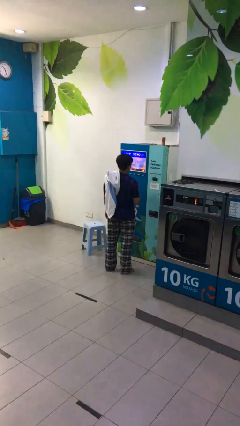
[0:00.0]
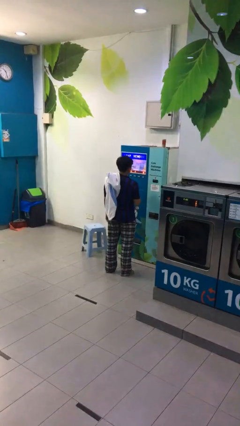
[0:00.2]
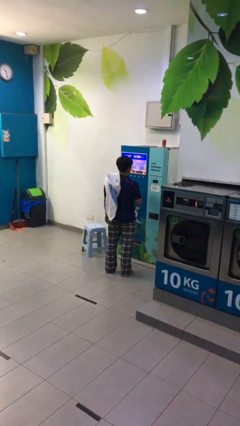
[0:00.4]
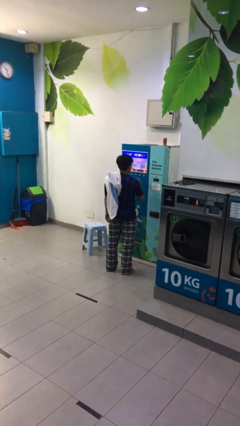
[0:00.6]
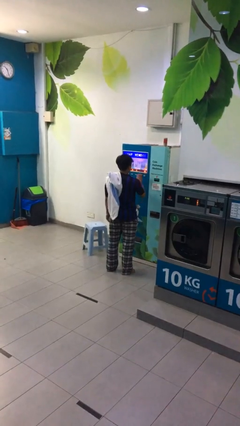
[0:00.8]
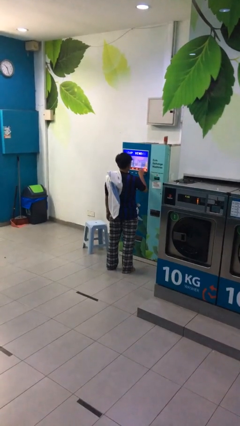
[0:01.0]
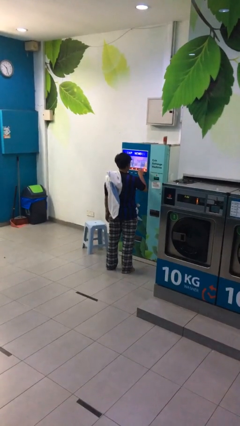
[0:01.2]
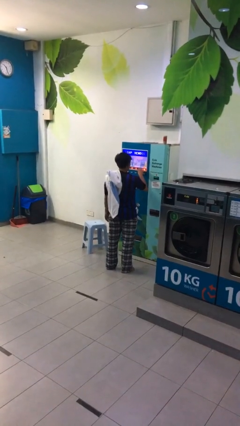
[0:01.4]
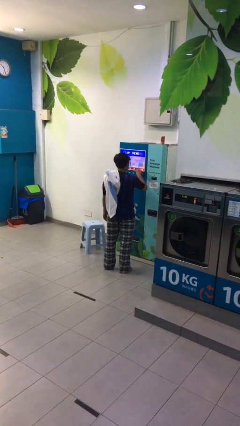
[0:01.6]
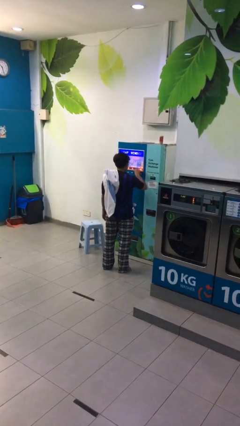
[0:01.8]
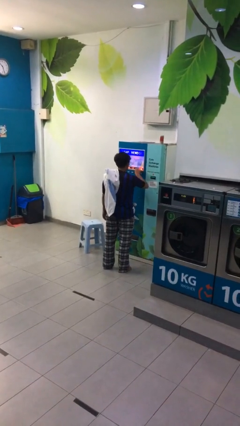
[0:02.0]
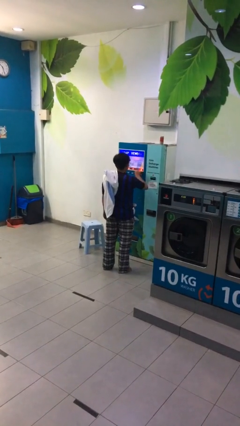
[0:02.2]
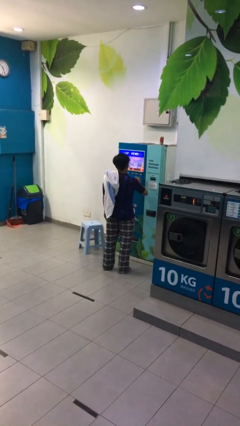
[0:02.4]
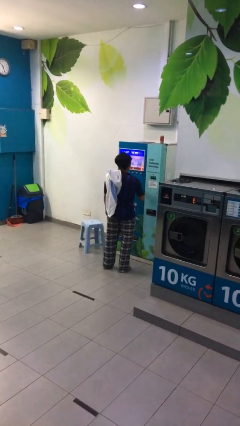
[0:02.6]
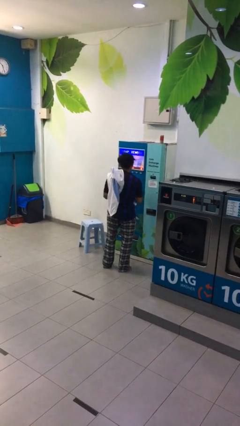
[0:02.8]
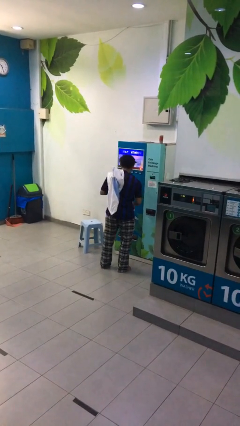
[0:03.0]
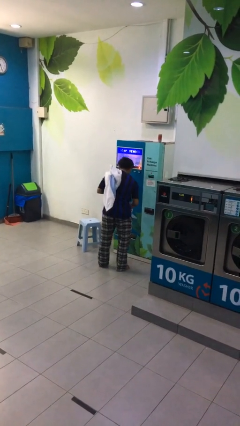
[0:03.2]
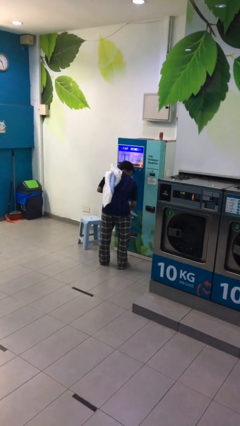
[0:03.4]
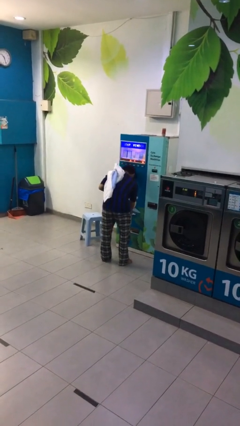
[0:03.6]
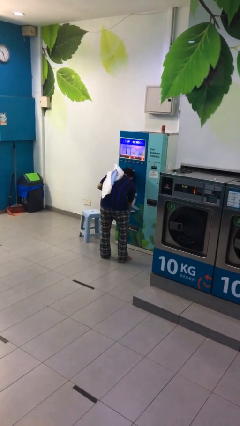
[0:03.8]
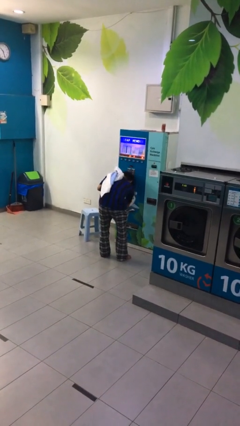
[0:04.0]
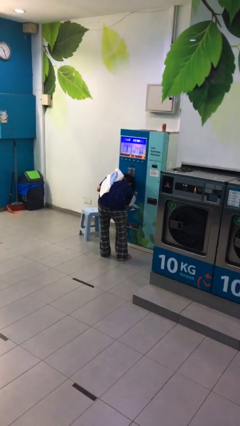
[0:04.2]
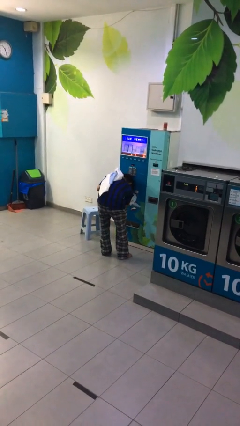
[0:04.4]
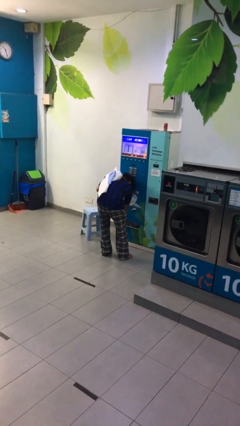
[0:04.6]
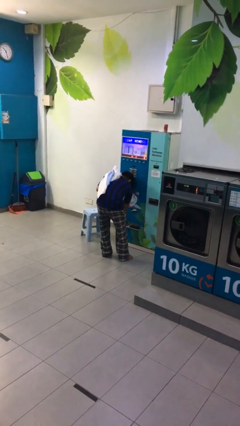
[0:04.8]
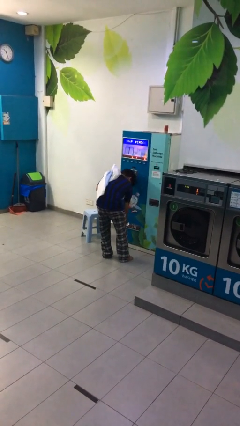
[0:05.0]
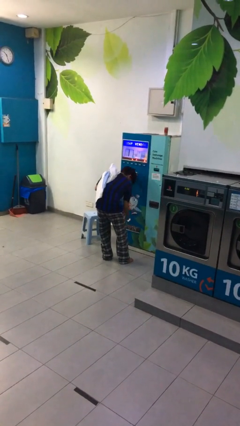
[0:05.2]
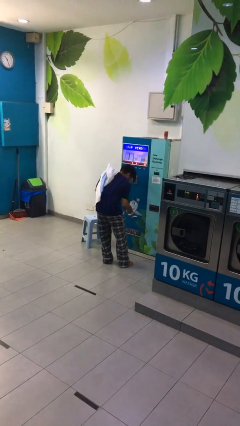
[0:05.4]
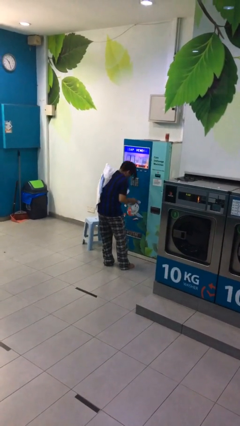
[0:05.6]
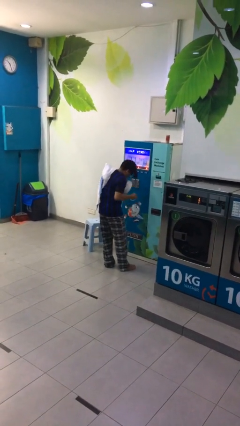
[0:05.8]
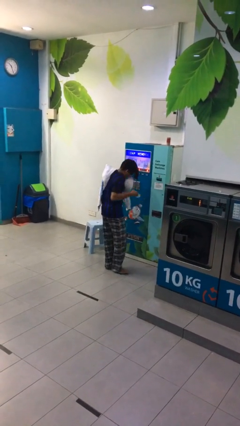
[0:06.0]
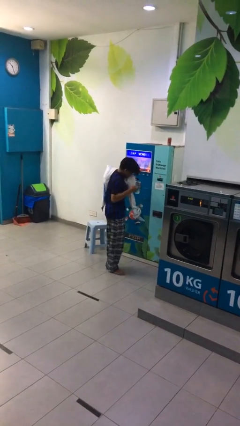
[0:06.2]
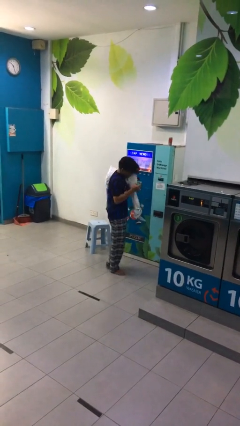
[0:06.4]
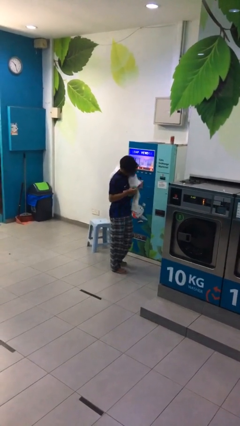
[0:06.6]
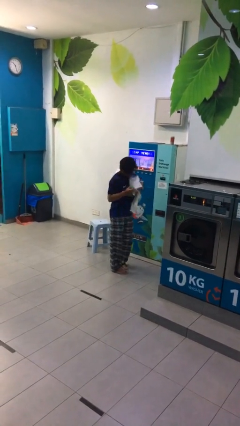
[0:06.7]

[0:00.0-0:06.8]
person purchases from machine

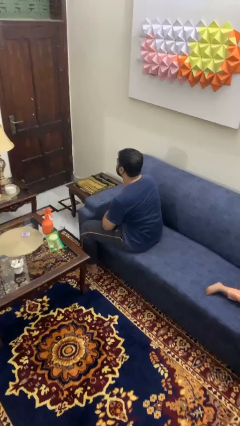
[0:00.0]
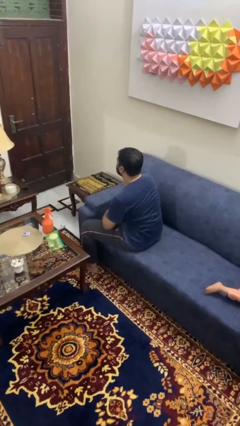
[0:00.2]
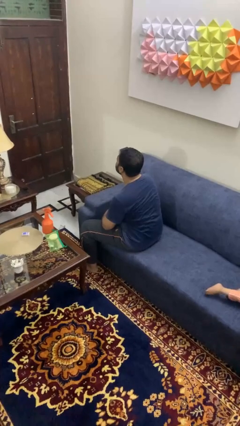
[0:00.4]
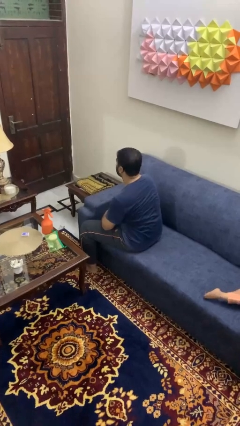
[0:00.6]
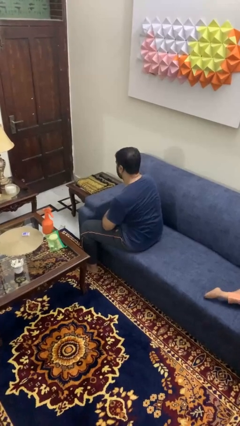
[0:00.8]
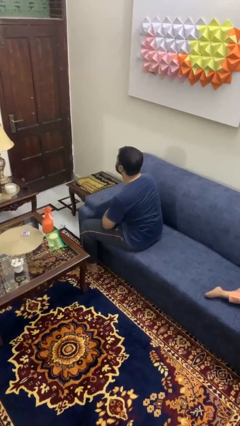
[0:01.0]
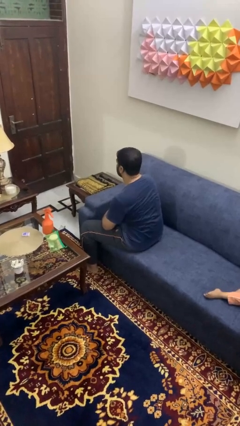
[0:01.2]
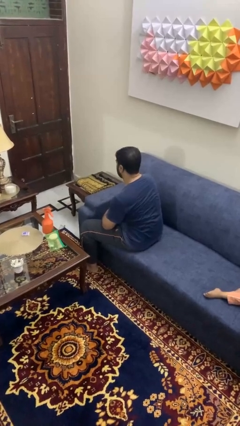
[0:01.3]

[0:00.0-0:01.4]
person nods head

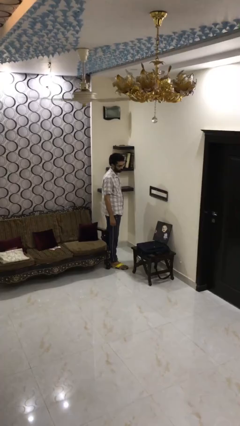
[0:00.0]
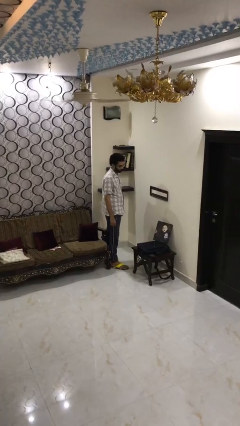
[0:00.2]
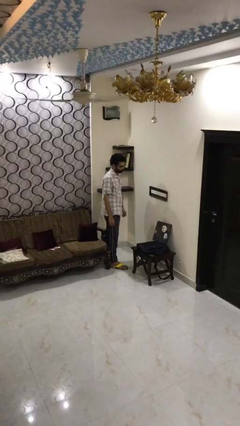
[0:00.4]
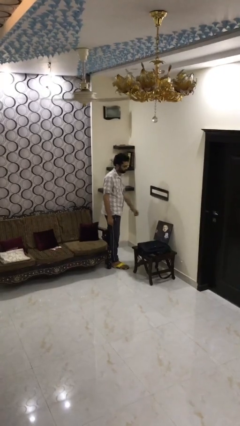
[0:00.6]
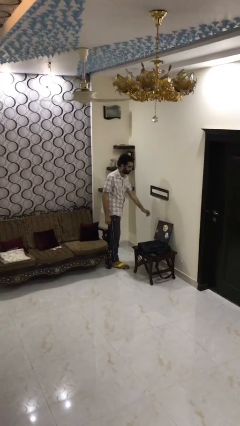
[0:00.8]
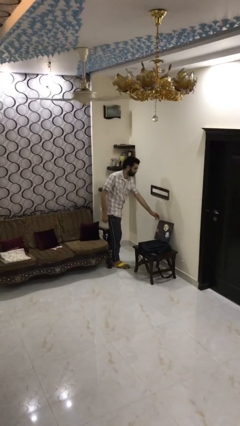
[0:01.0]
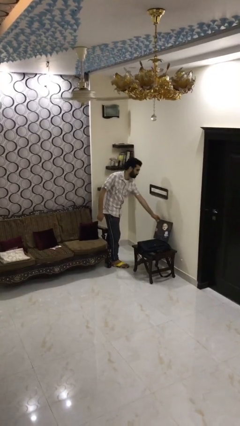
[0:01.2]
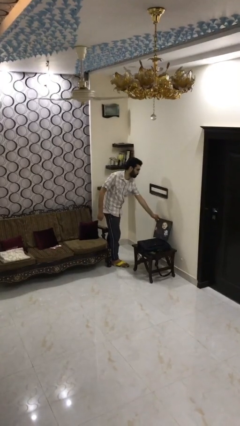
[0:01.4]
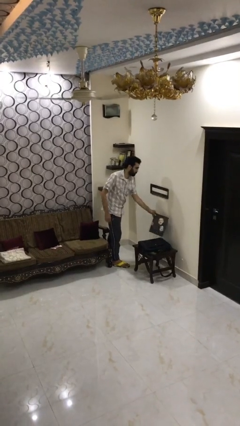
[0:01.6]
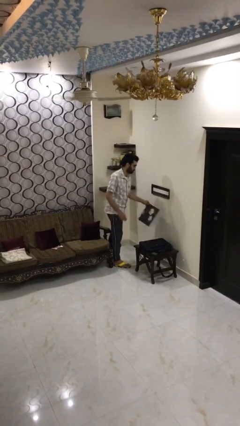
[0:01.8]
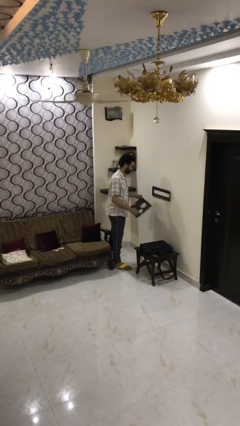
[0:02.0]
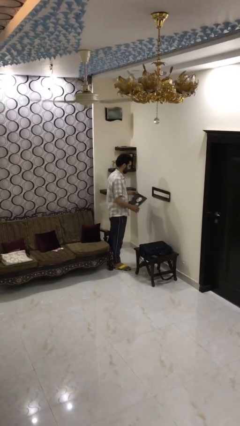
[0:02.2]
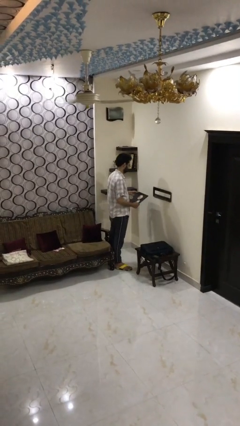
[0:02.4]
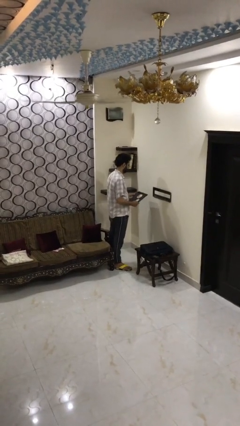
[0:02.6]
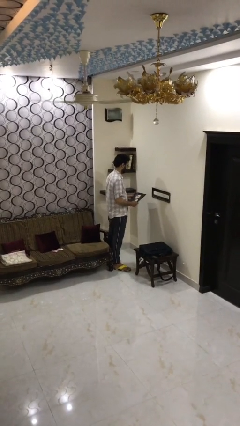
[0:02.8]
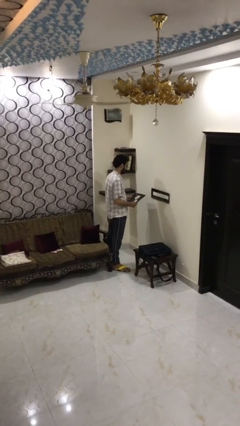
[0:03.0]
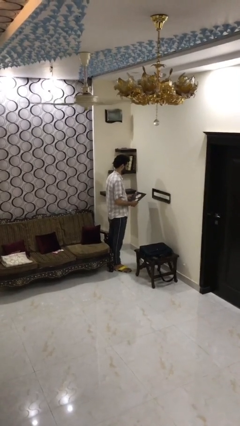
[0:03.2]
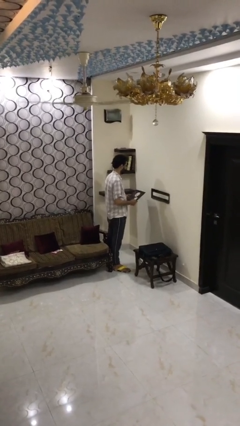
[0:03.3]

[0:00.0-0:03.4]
person picks up object from table

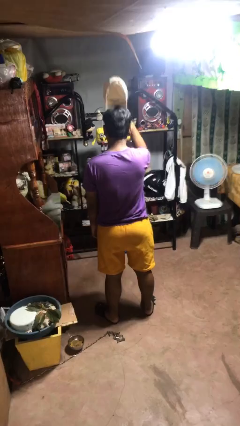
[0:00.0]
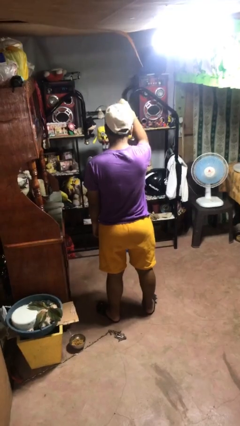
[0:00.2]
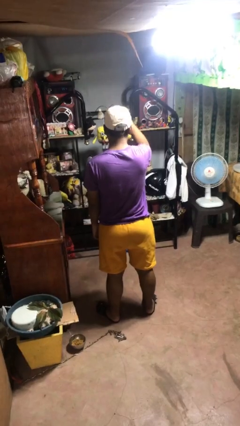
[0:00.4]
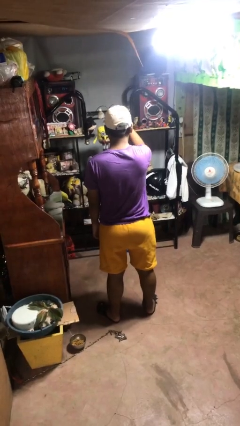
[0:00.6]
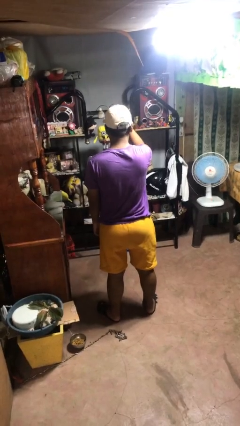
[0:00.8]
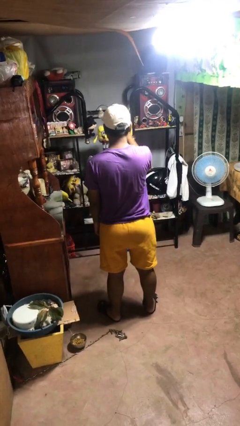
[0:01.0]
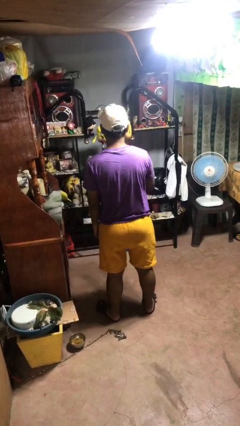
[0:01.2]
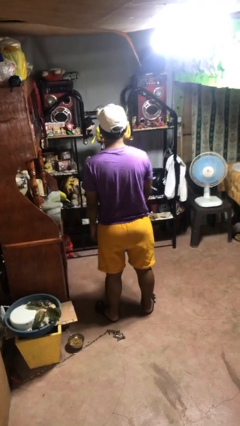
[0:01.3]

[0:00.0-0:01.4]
person puts on hat

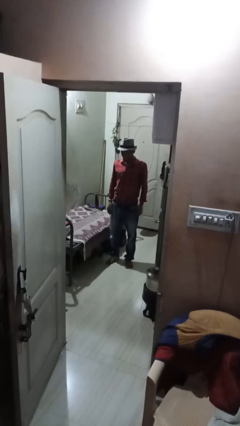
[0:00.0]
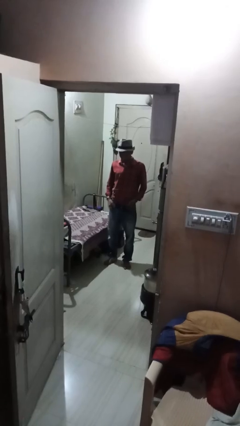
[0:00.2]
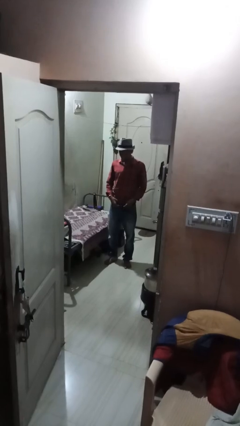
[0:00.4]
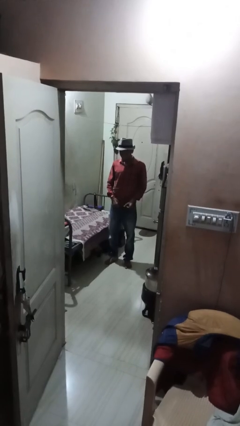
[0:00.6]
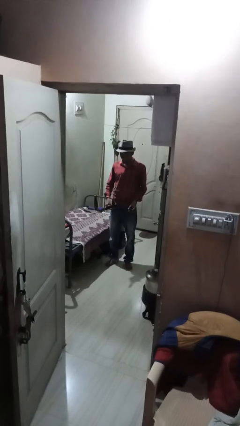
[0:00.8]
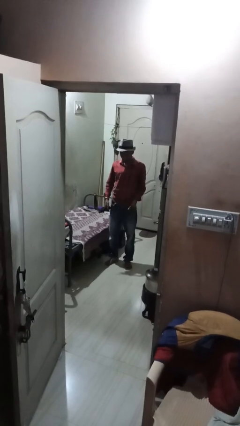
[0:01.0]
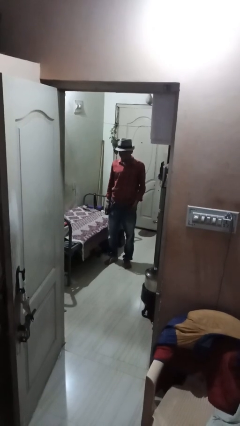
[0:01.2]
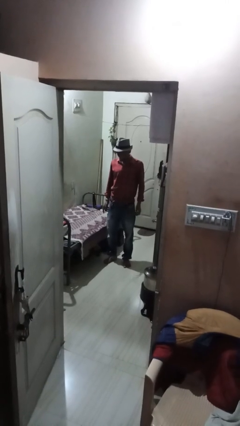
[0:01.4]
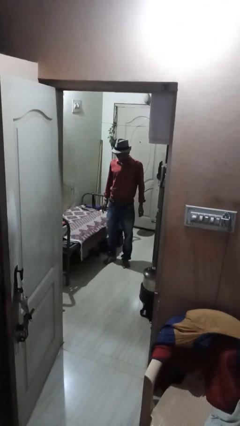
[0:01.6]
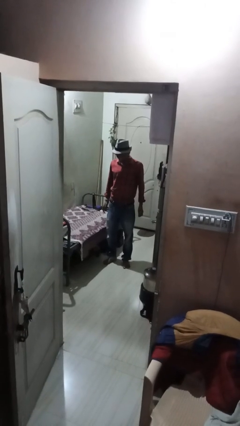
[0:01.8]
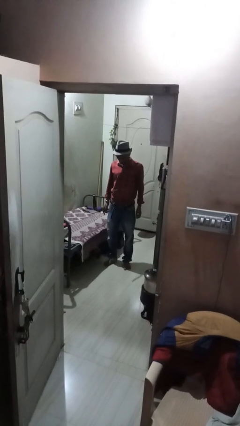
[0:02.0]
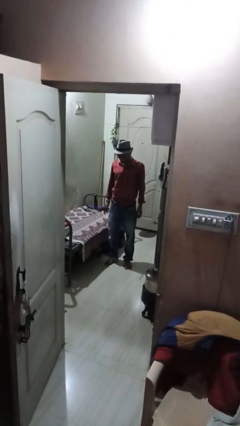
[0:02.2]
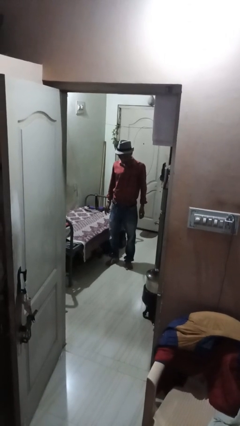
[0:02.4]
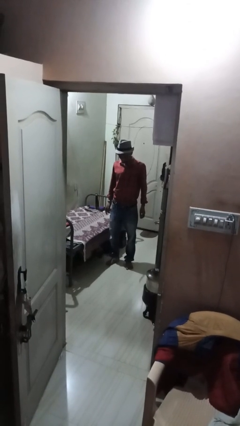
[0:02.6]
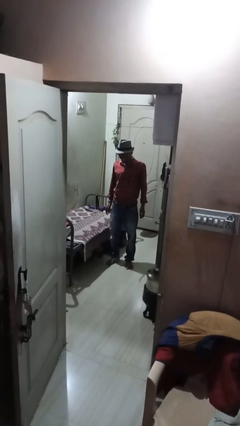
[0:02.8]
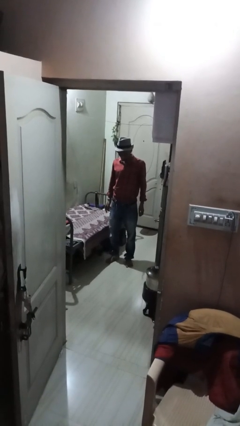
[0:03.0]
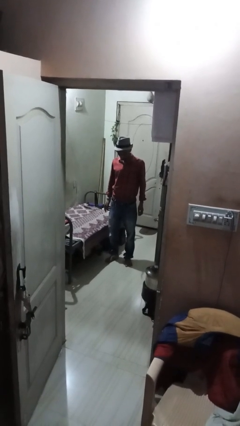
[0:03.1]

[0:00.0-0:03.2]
person takes off belt

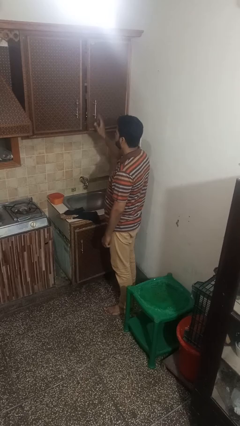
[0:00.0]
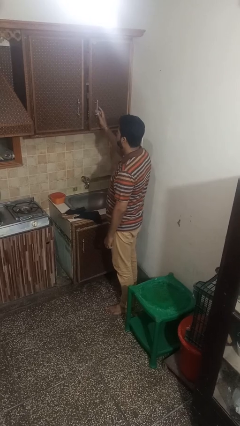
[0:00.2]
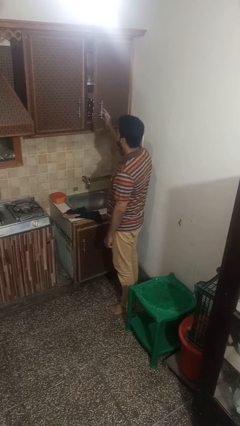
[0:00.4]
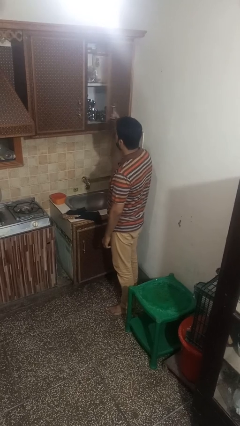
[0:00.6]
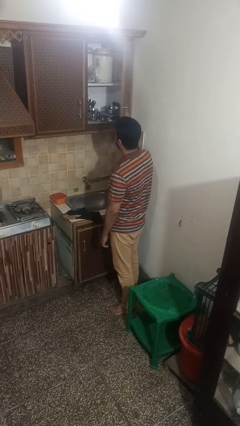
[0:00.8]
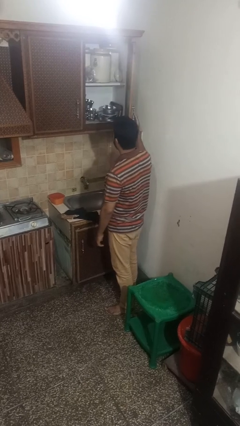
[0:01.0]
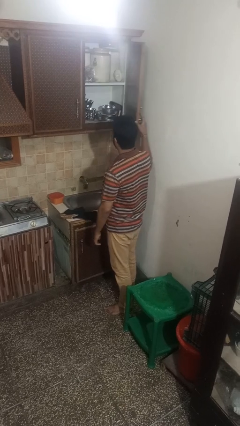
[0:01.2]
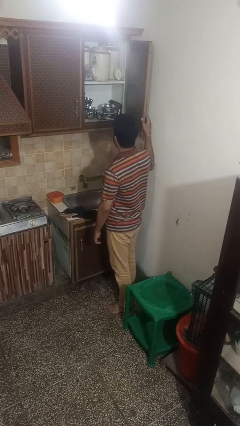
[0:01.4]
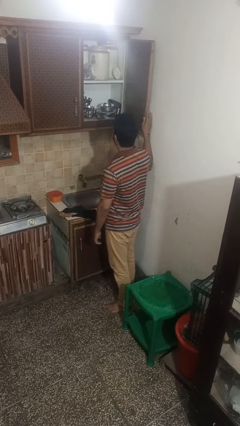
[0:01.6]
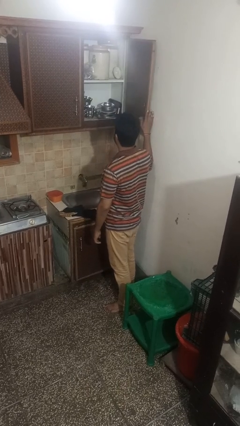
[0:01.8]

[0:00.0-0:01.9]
person opens cabinet
